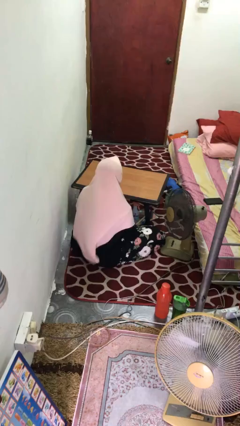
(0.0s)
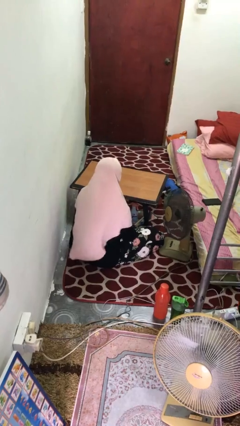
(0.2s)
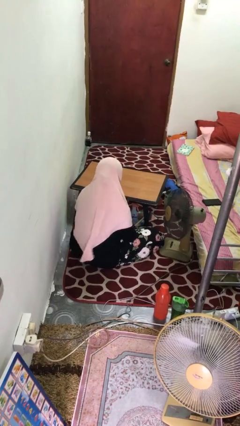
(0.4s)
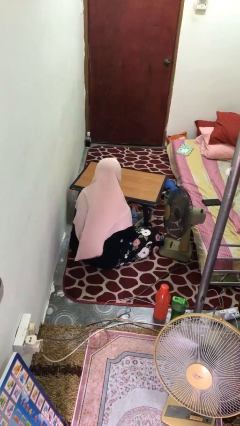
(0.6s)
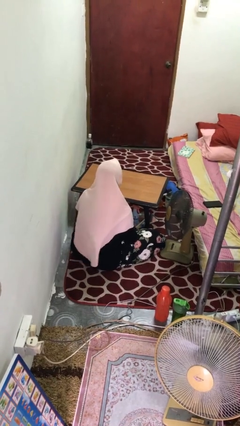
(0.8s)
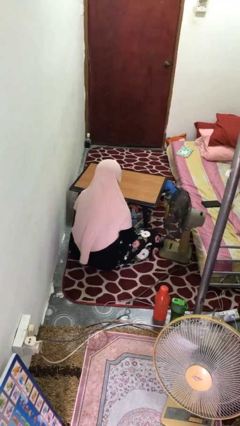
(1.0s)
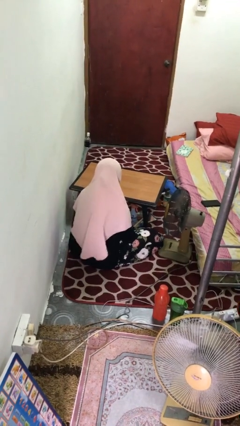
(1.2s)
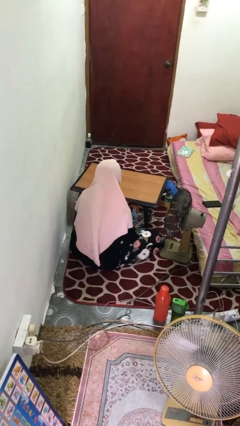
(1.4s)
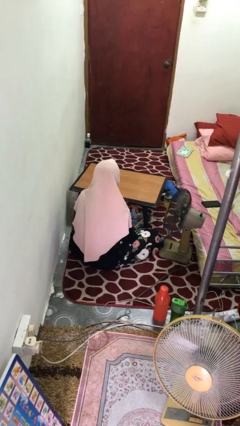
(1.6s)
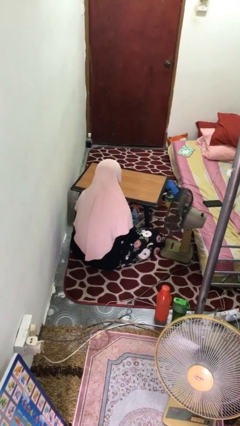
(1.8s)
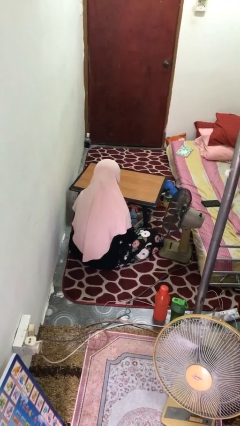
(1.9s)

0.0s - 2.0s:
person nods head

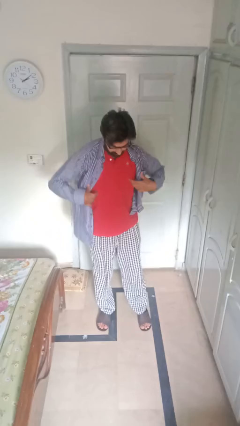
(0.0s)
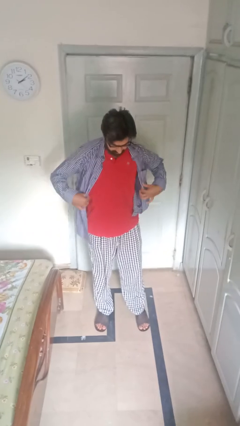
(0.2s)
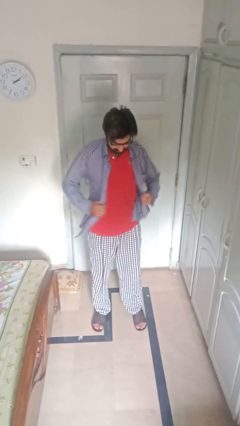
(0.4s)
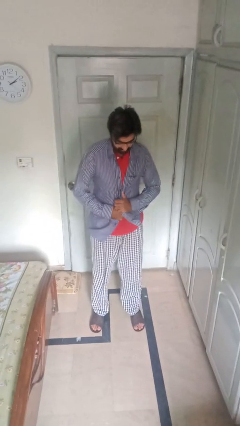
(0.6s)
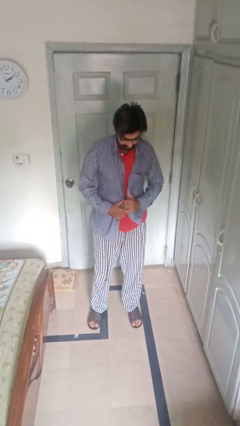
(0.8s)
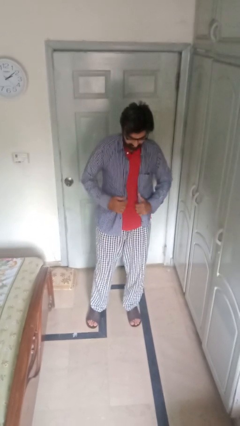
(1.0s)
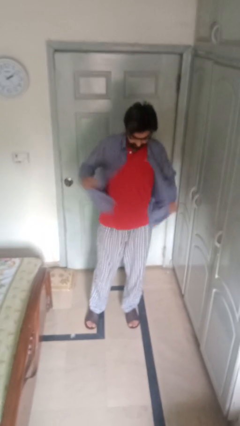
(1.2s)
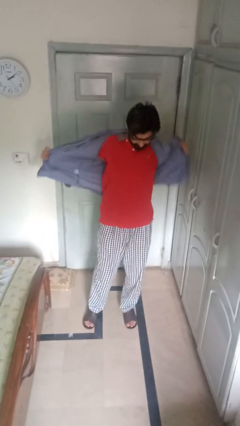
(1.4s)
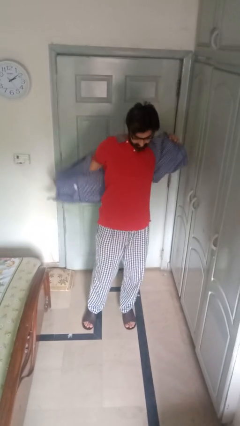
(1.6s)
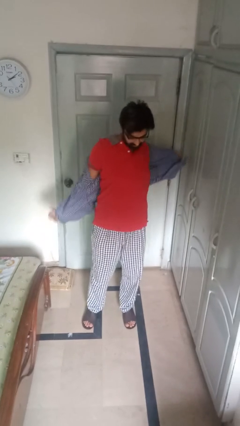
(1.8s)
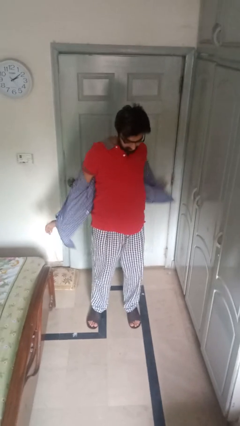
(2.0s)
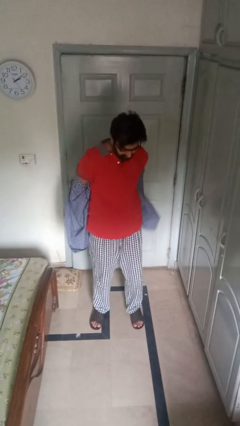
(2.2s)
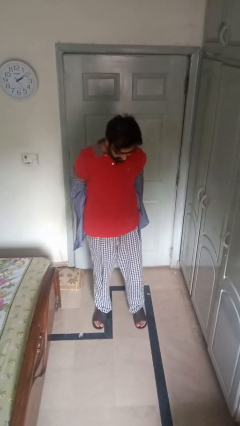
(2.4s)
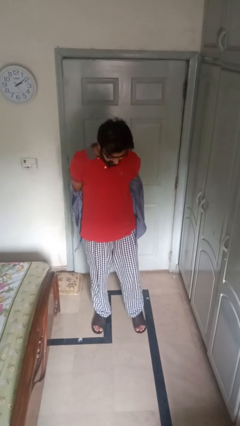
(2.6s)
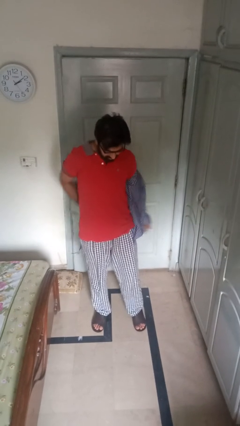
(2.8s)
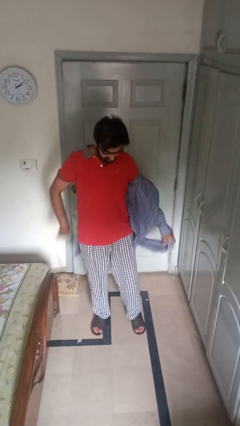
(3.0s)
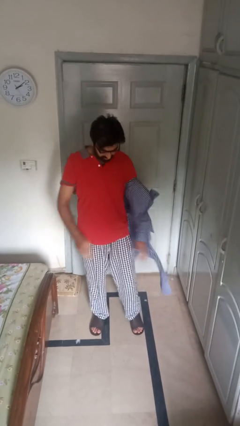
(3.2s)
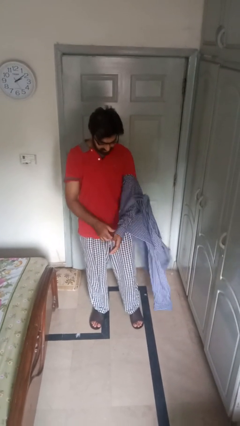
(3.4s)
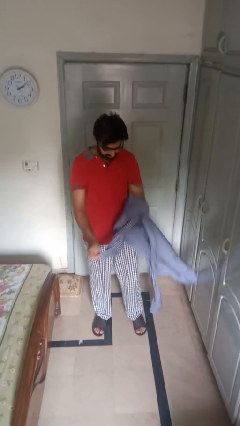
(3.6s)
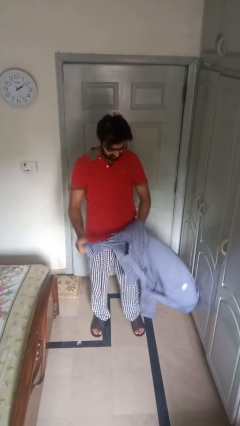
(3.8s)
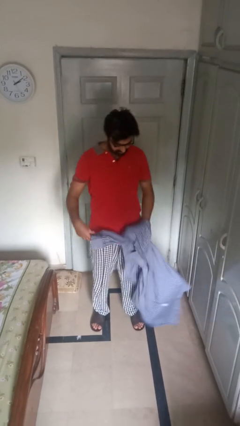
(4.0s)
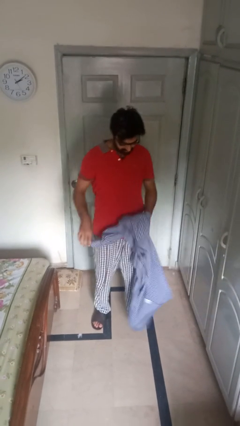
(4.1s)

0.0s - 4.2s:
person takes off shirt

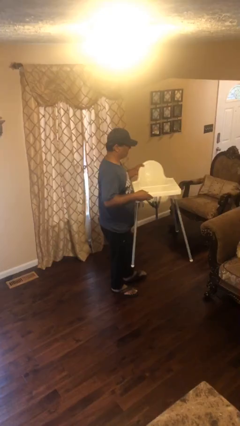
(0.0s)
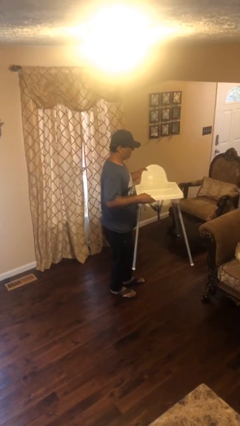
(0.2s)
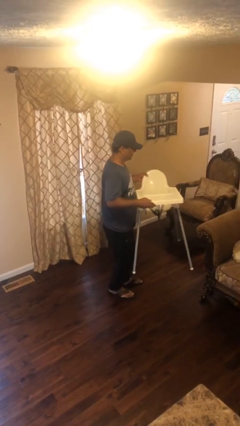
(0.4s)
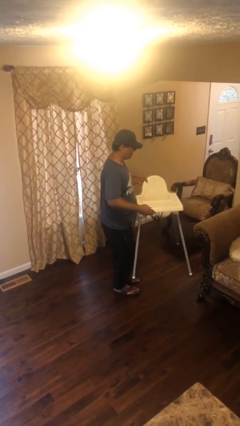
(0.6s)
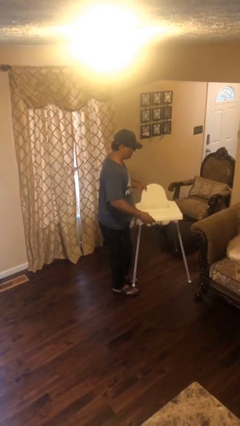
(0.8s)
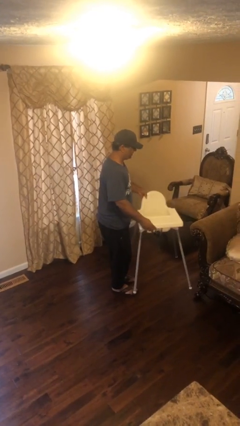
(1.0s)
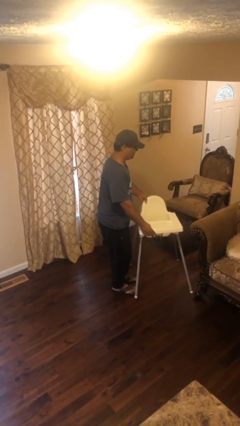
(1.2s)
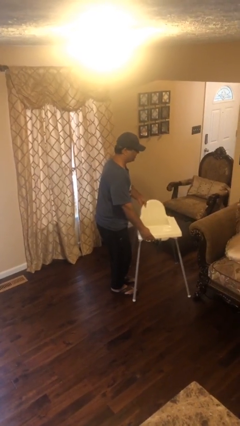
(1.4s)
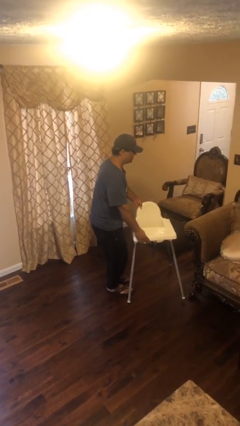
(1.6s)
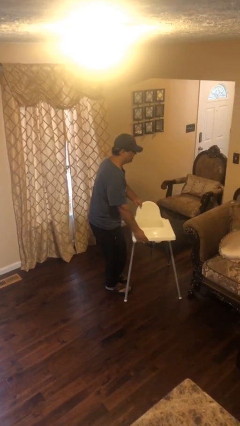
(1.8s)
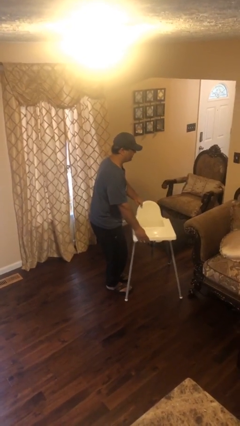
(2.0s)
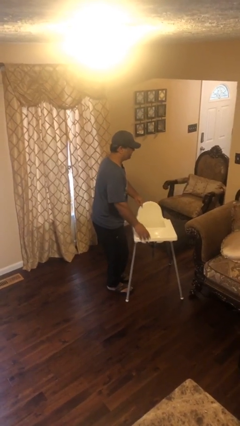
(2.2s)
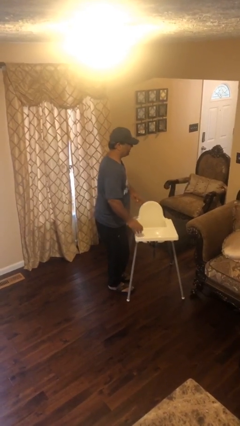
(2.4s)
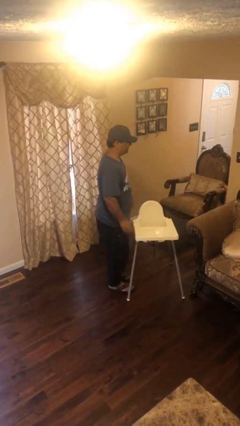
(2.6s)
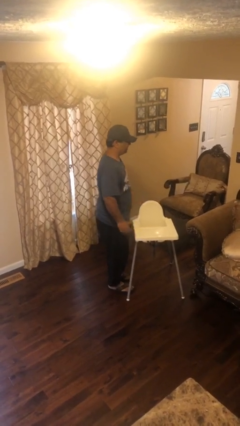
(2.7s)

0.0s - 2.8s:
person puts down object on floor

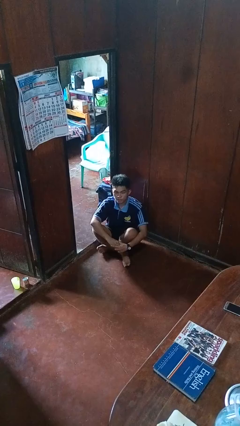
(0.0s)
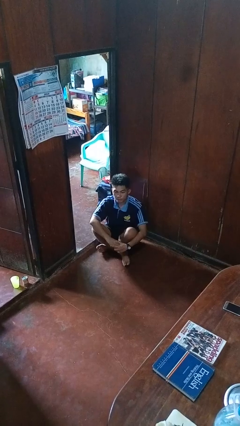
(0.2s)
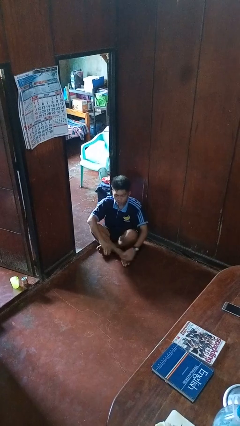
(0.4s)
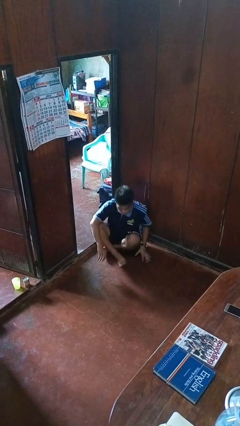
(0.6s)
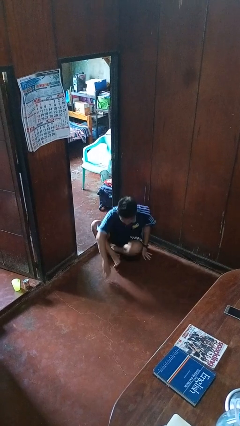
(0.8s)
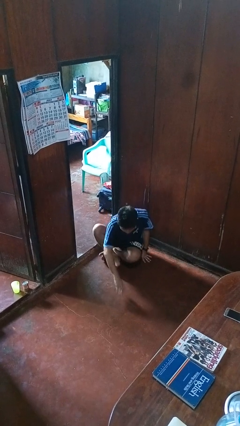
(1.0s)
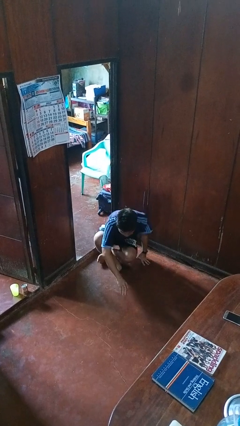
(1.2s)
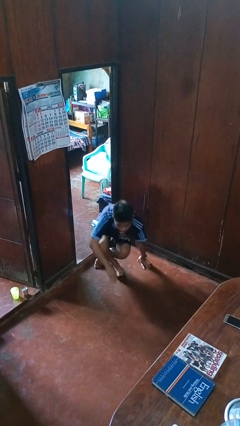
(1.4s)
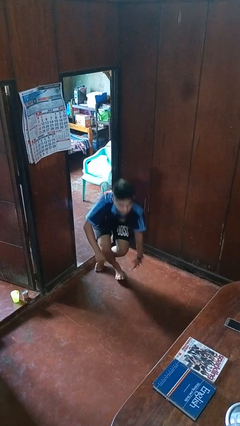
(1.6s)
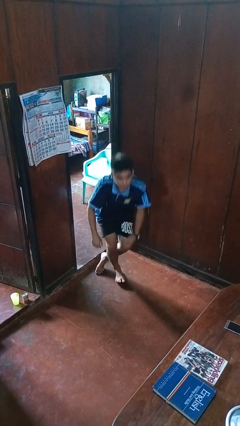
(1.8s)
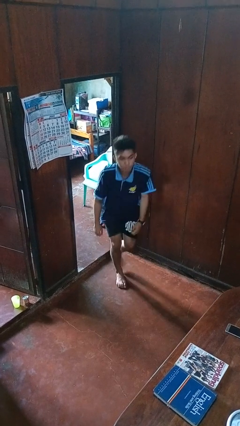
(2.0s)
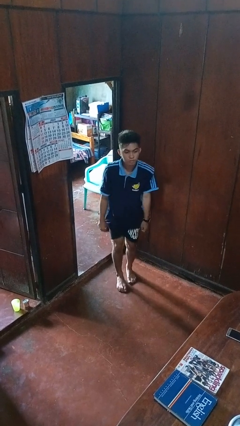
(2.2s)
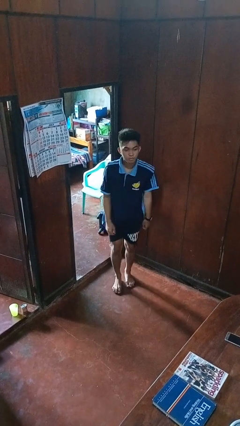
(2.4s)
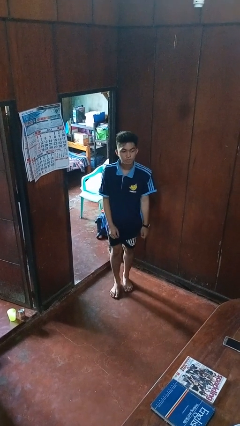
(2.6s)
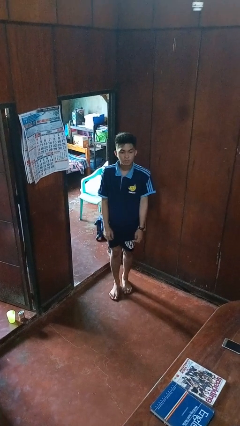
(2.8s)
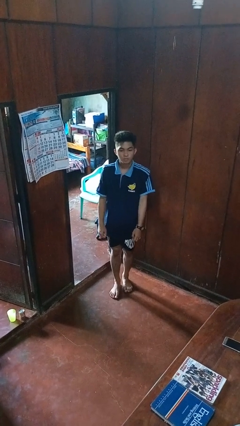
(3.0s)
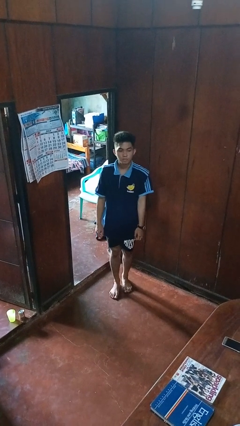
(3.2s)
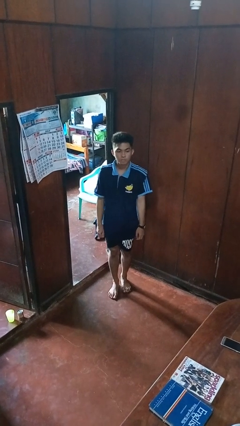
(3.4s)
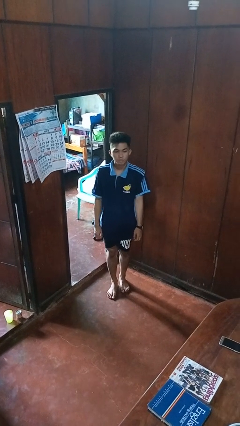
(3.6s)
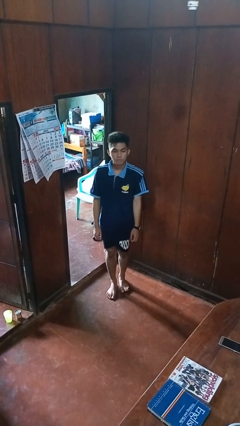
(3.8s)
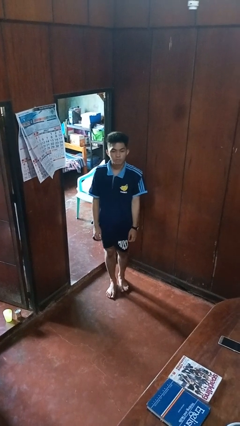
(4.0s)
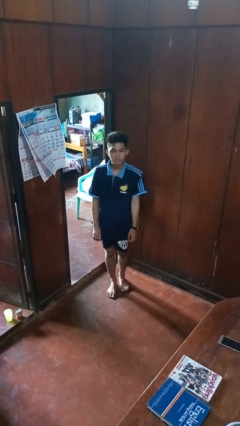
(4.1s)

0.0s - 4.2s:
person stands up from floor

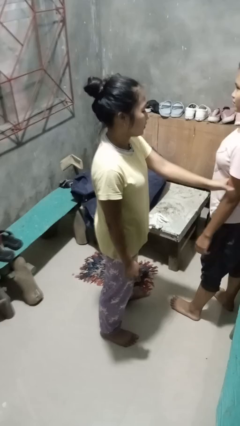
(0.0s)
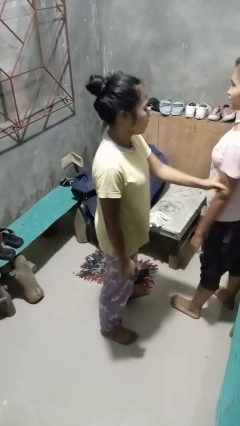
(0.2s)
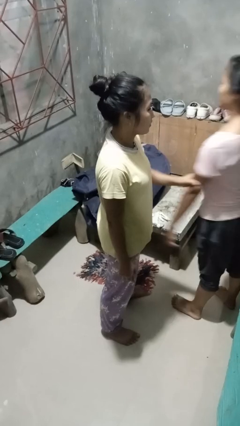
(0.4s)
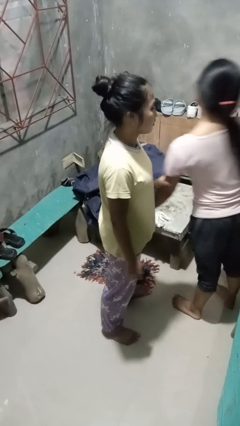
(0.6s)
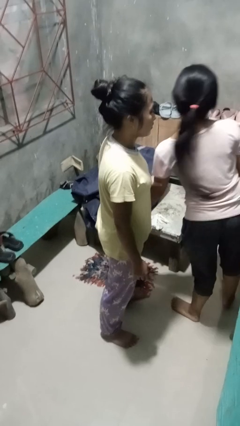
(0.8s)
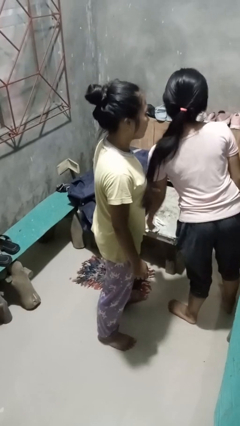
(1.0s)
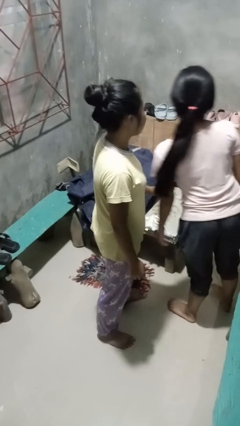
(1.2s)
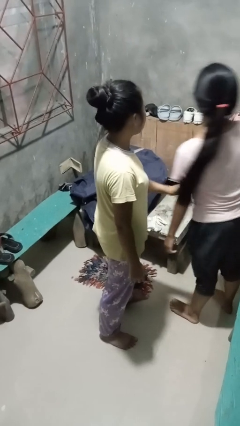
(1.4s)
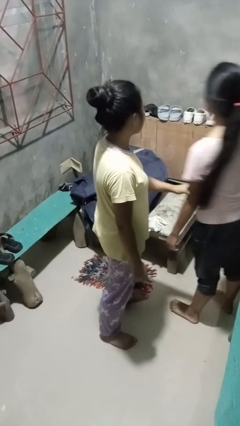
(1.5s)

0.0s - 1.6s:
person grabs person by bicep

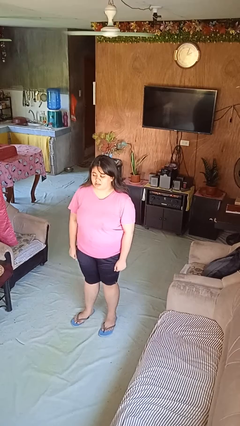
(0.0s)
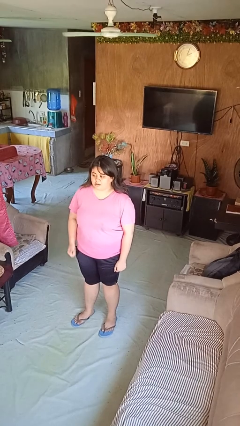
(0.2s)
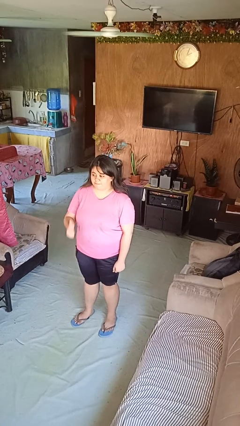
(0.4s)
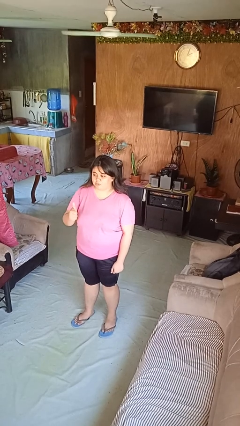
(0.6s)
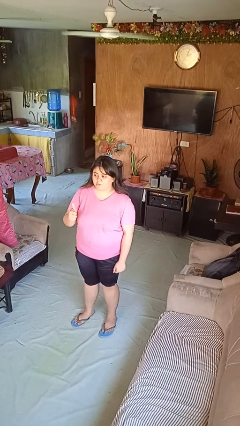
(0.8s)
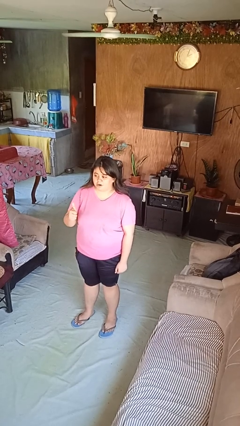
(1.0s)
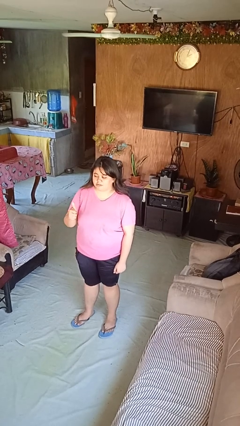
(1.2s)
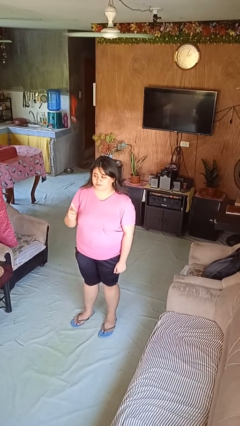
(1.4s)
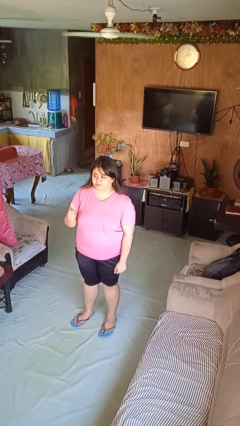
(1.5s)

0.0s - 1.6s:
person gestures thumbs up

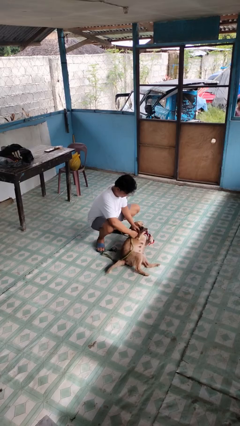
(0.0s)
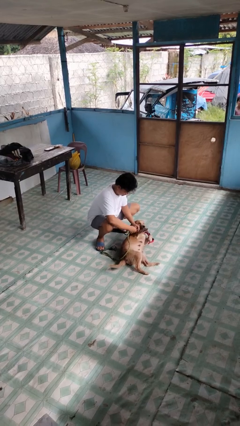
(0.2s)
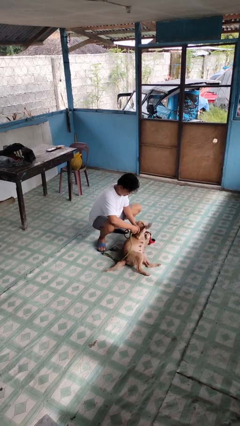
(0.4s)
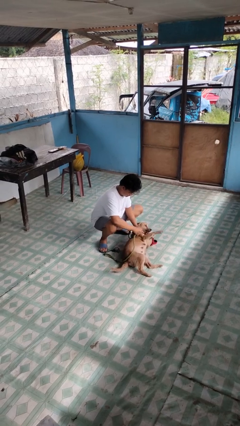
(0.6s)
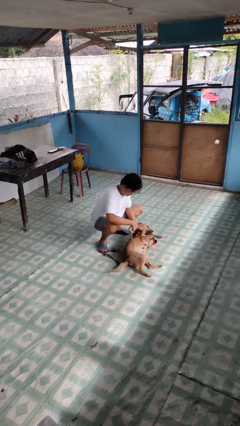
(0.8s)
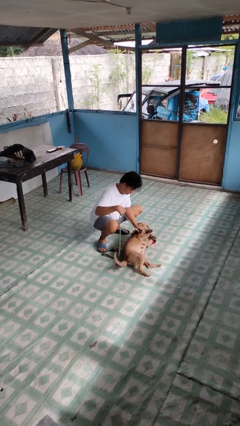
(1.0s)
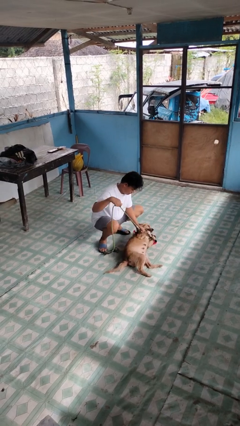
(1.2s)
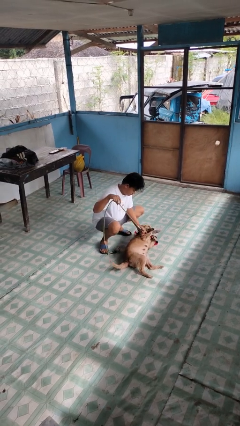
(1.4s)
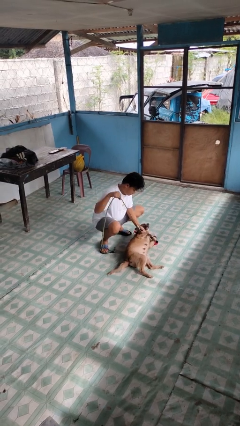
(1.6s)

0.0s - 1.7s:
person attaches leash to dog
